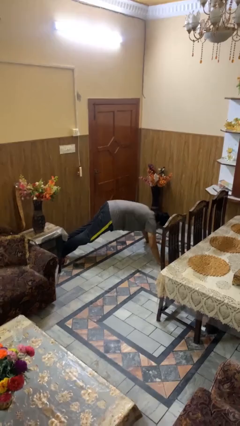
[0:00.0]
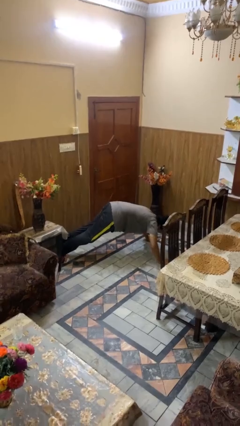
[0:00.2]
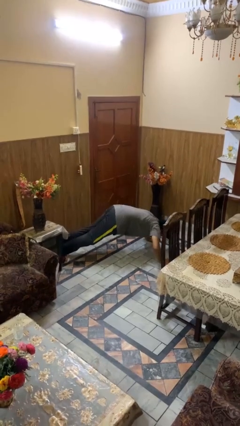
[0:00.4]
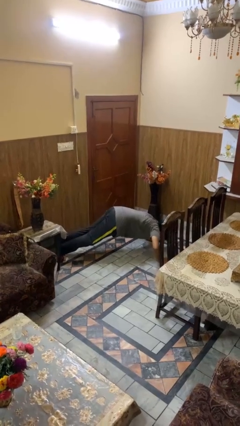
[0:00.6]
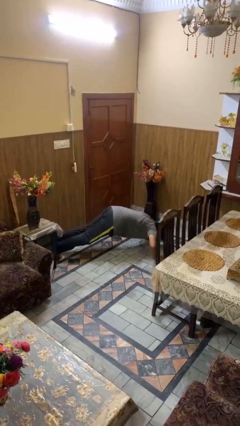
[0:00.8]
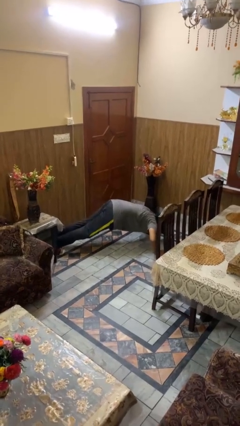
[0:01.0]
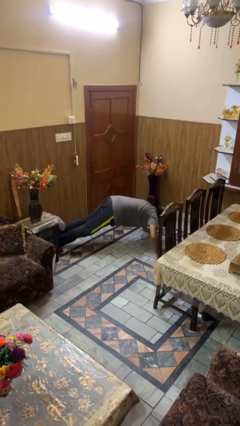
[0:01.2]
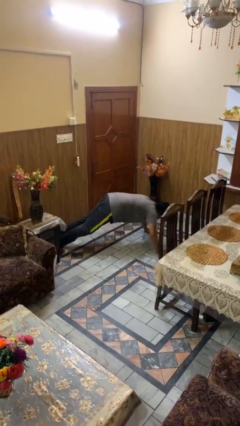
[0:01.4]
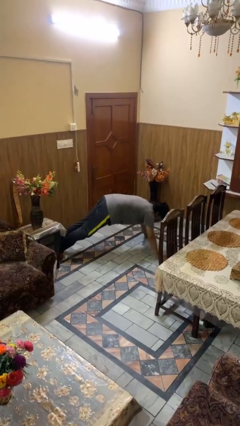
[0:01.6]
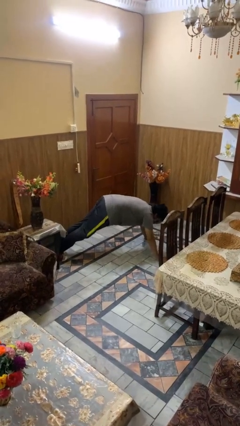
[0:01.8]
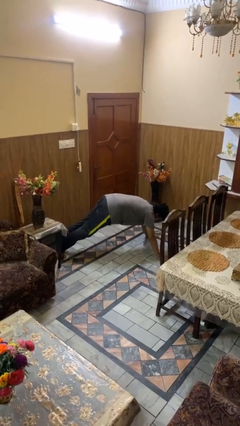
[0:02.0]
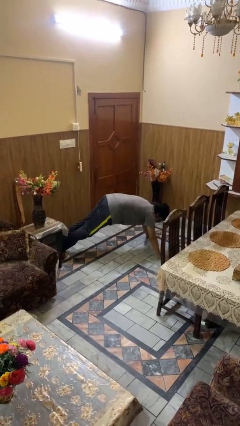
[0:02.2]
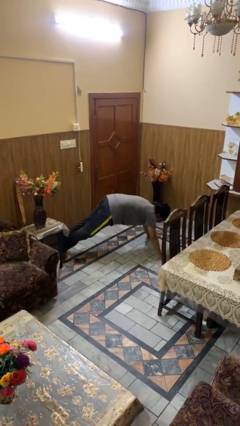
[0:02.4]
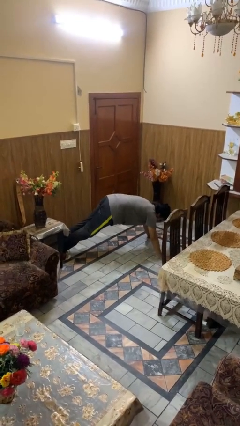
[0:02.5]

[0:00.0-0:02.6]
person exercises with pushup

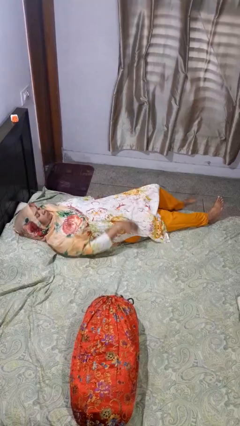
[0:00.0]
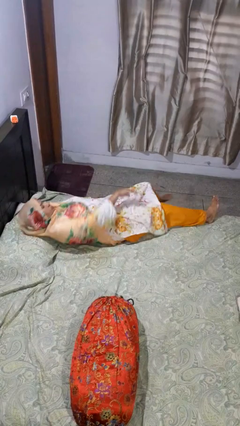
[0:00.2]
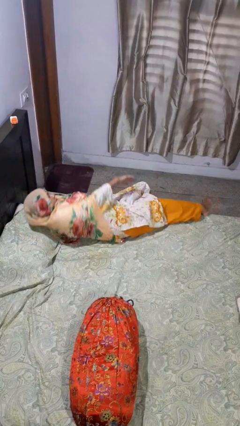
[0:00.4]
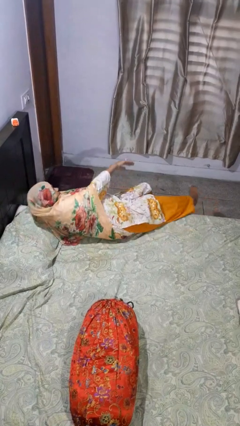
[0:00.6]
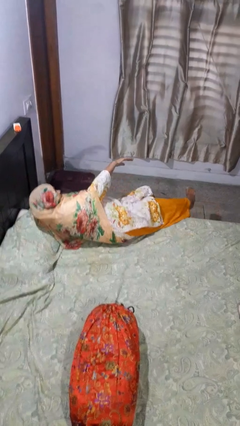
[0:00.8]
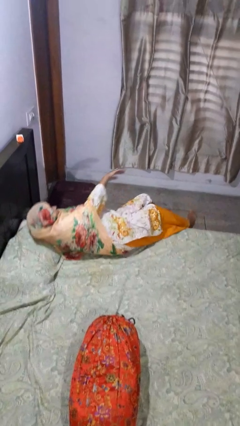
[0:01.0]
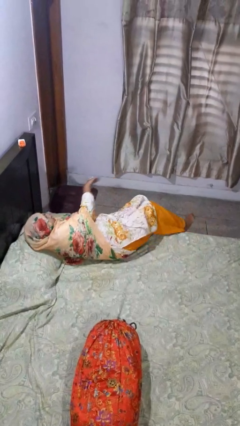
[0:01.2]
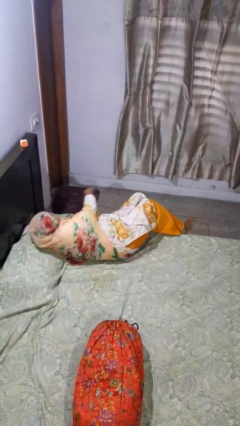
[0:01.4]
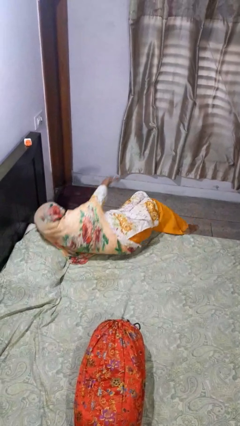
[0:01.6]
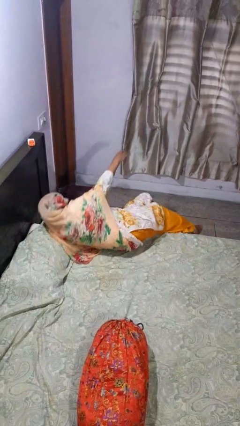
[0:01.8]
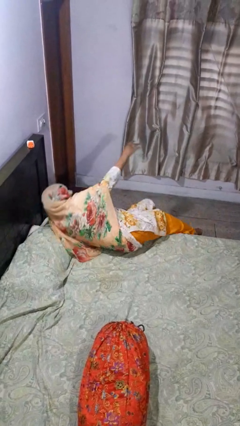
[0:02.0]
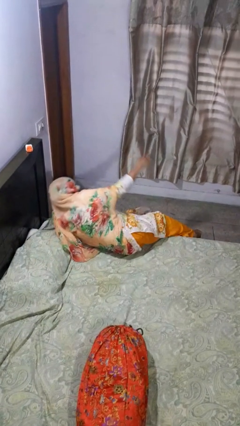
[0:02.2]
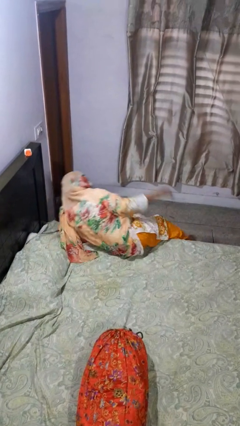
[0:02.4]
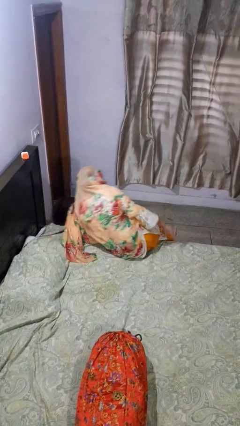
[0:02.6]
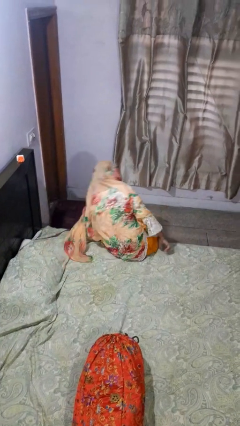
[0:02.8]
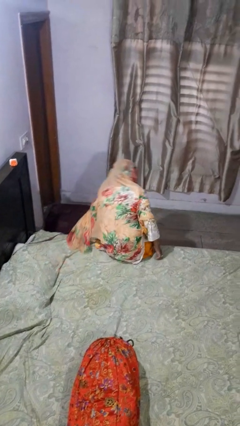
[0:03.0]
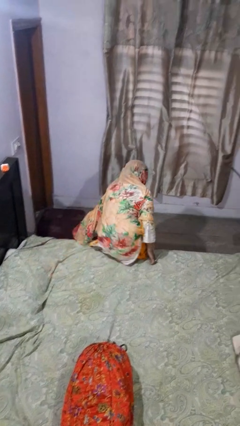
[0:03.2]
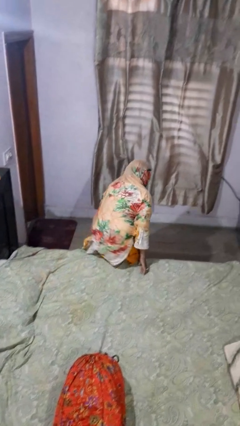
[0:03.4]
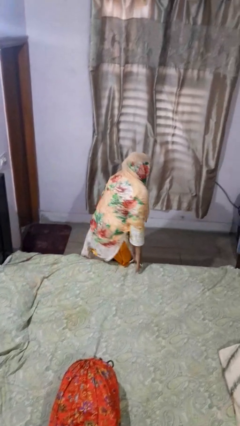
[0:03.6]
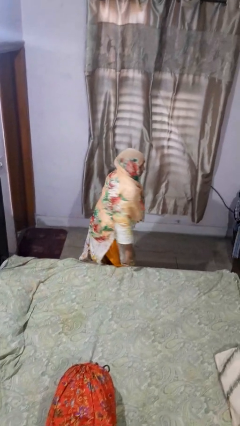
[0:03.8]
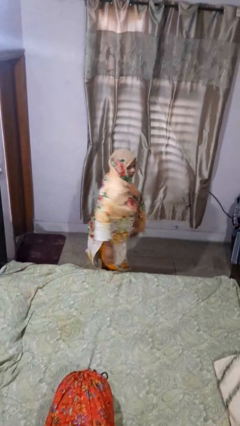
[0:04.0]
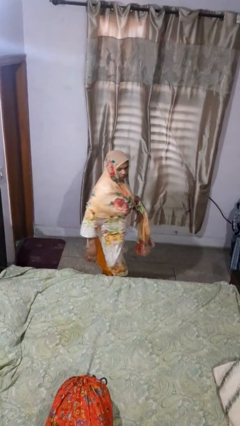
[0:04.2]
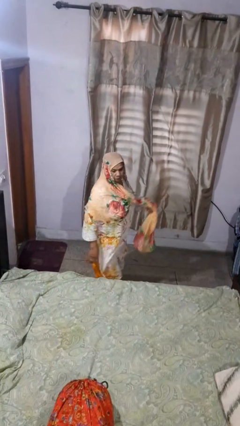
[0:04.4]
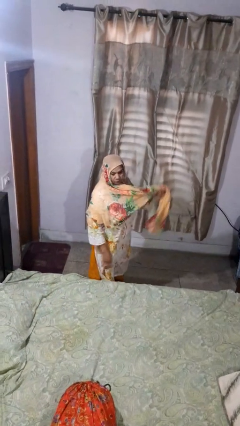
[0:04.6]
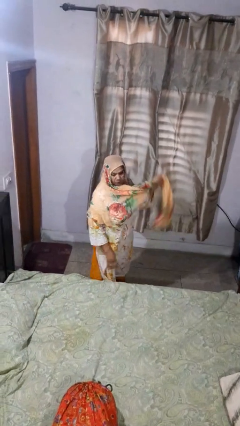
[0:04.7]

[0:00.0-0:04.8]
person stands up

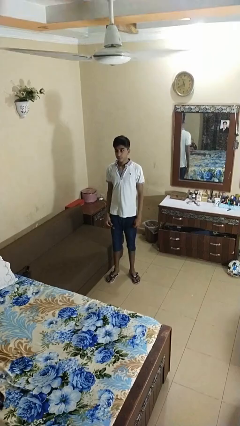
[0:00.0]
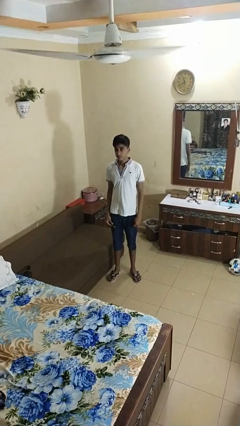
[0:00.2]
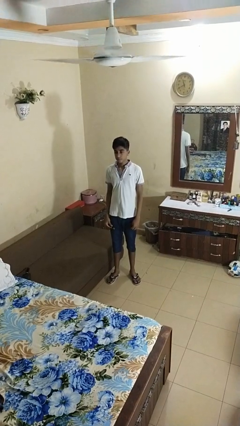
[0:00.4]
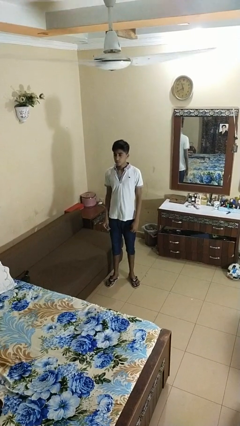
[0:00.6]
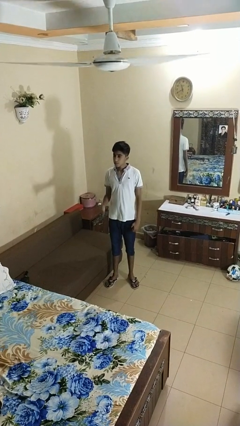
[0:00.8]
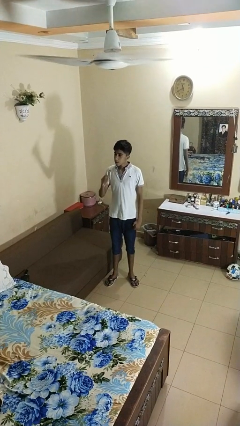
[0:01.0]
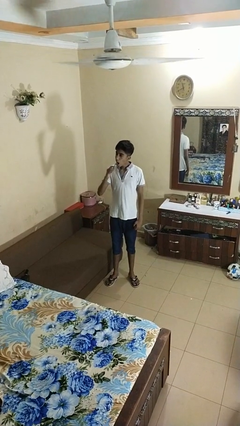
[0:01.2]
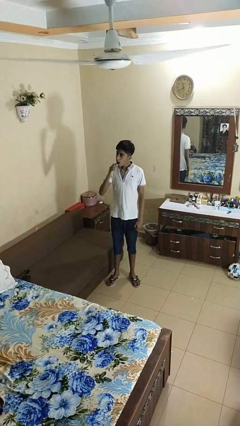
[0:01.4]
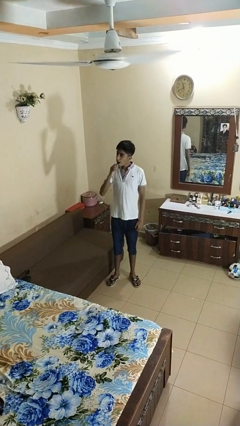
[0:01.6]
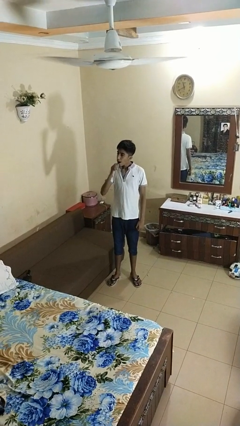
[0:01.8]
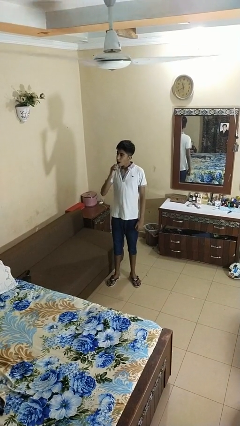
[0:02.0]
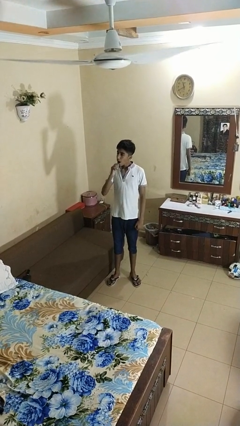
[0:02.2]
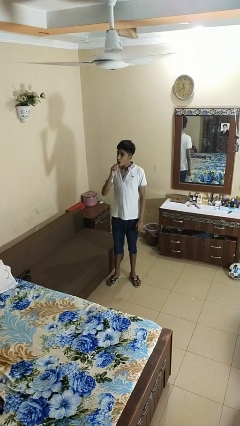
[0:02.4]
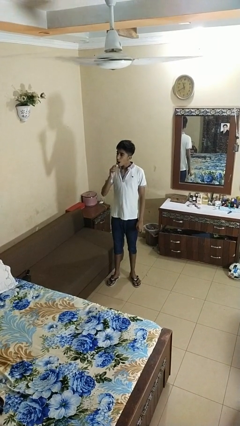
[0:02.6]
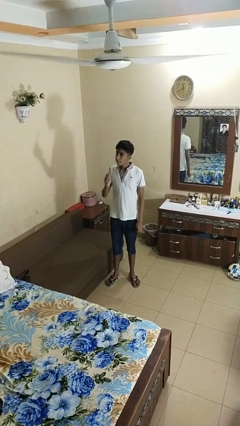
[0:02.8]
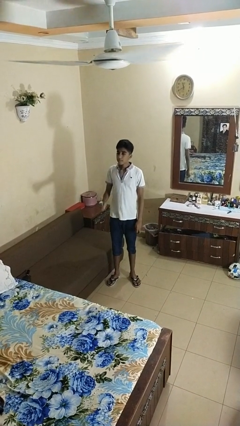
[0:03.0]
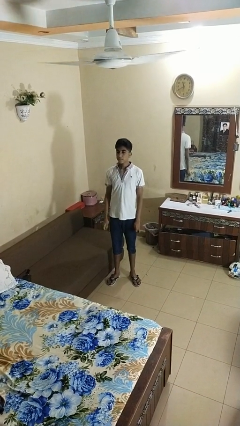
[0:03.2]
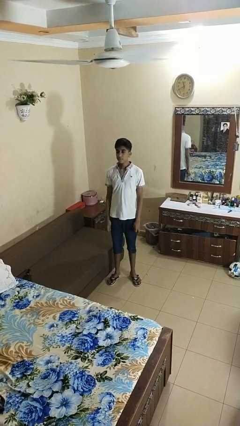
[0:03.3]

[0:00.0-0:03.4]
person brushes teeth

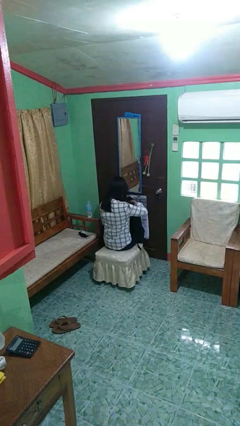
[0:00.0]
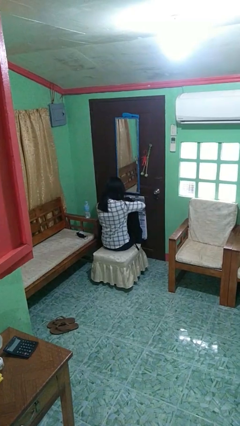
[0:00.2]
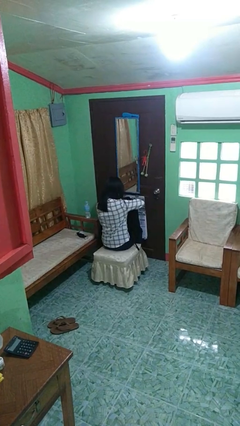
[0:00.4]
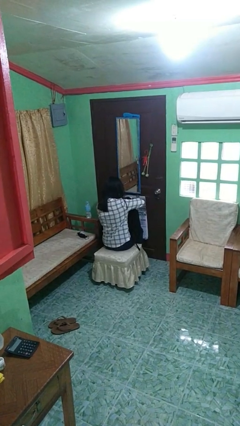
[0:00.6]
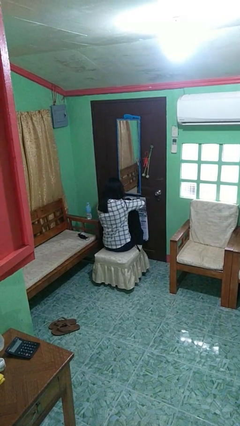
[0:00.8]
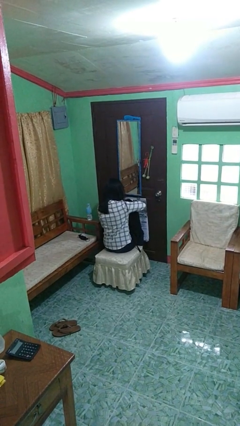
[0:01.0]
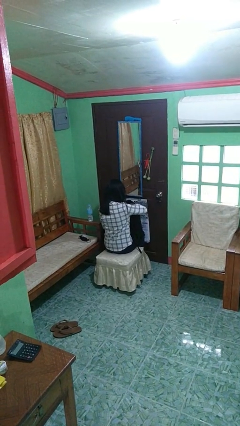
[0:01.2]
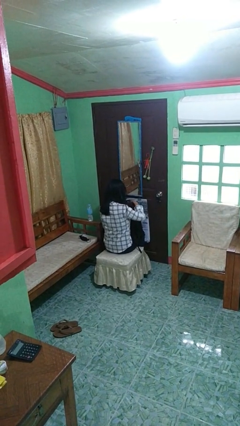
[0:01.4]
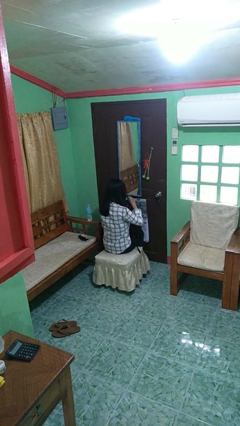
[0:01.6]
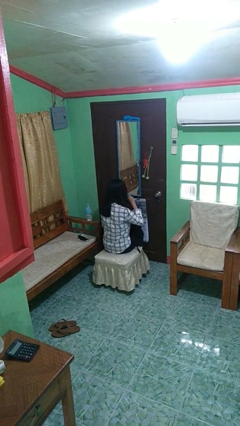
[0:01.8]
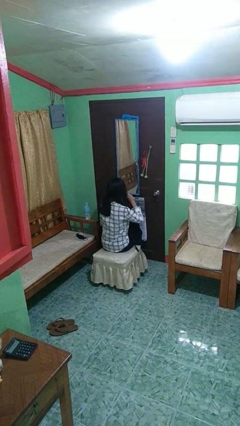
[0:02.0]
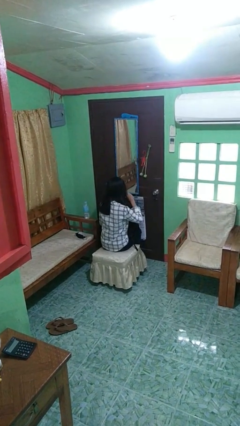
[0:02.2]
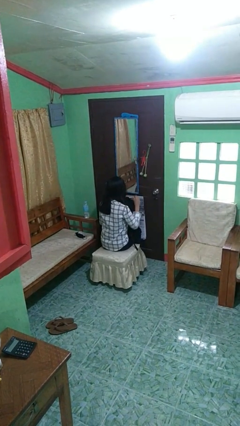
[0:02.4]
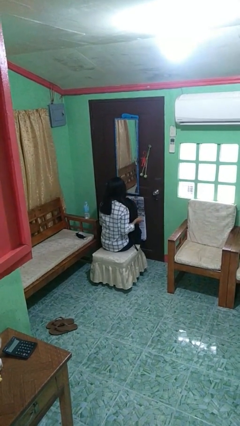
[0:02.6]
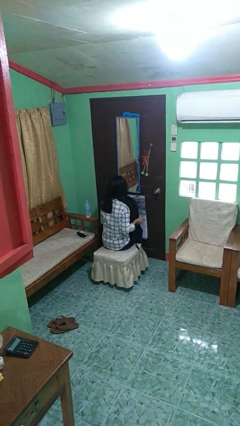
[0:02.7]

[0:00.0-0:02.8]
person eats snack from bag

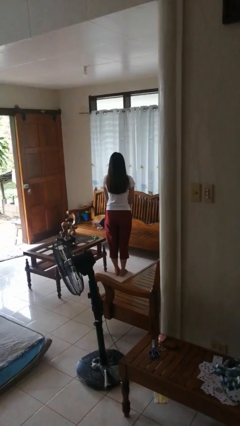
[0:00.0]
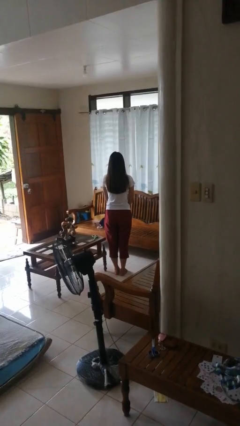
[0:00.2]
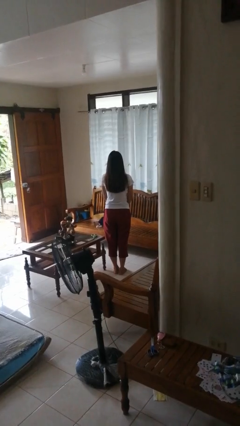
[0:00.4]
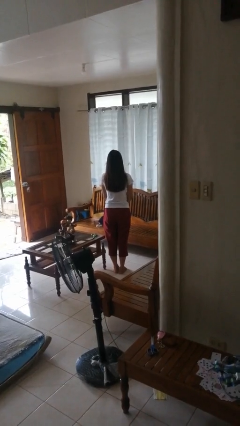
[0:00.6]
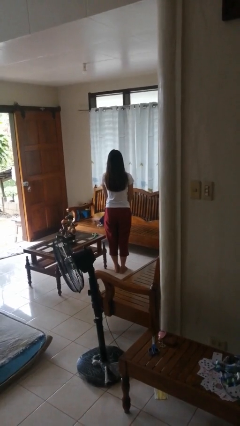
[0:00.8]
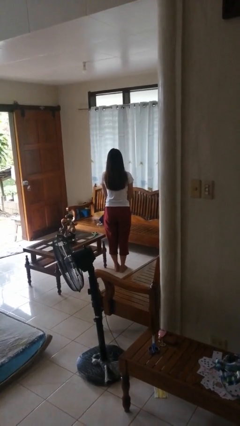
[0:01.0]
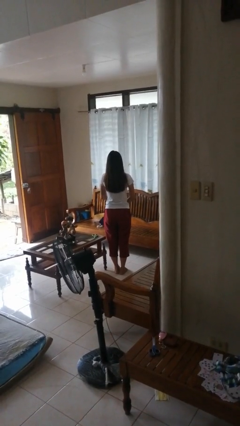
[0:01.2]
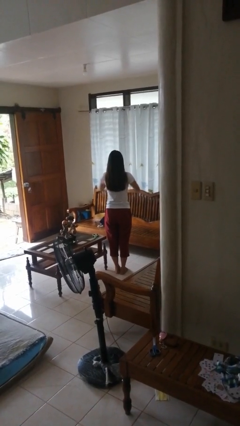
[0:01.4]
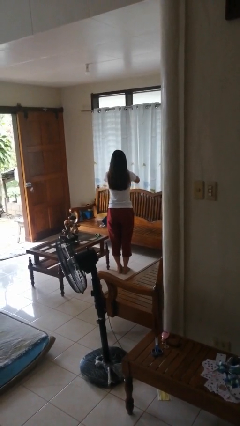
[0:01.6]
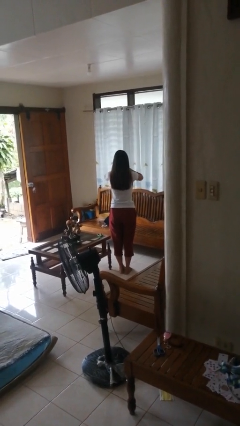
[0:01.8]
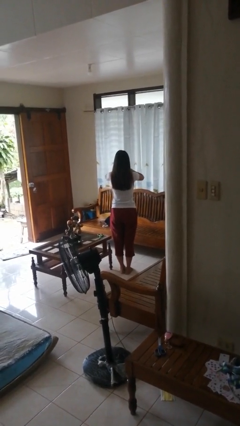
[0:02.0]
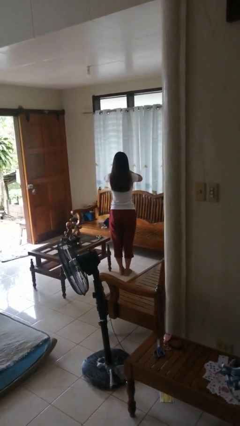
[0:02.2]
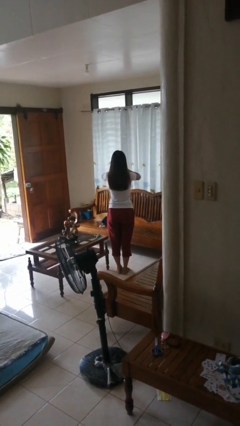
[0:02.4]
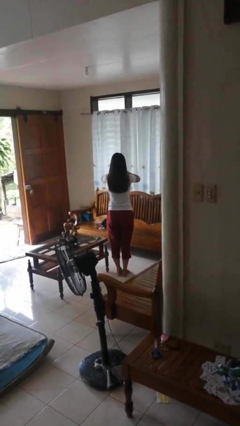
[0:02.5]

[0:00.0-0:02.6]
person covers face with hands

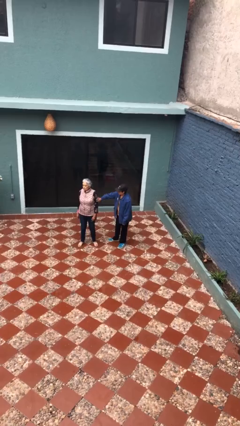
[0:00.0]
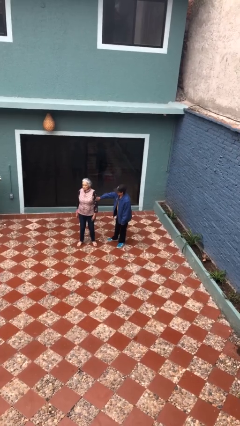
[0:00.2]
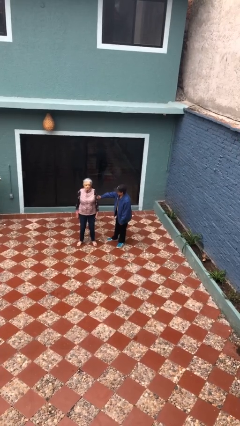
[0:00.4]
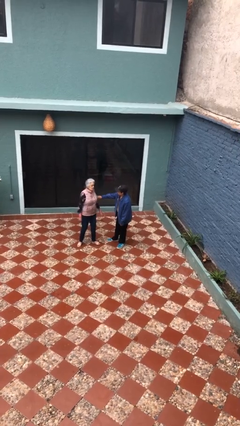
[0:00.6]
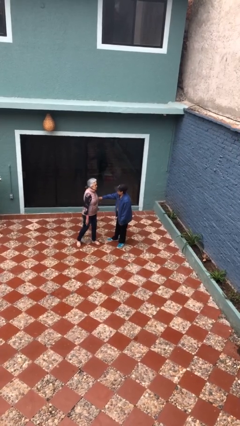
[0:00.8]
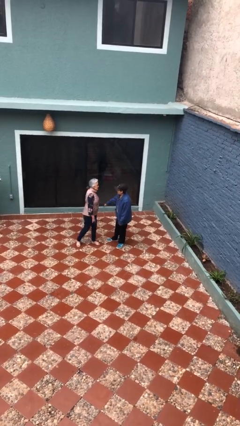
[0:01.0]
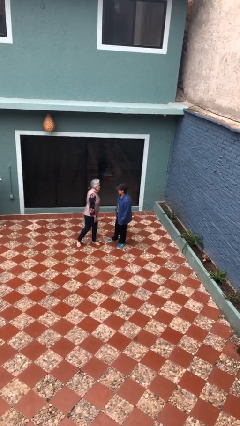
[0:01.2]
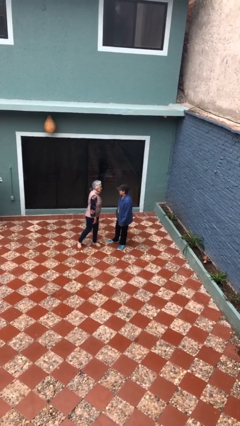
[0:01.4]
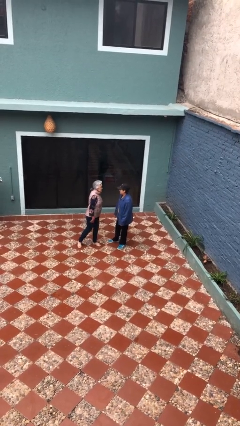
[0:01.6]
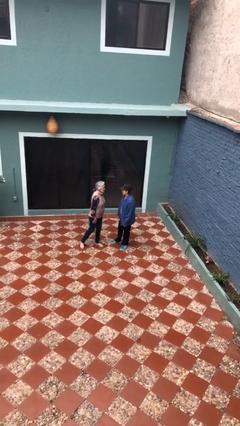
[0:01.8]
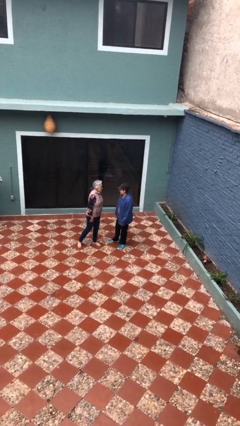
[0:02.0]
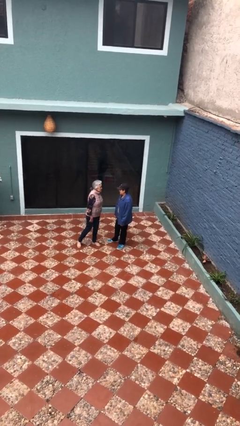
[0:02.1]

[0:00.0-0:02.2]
person grabs person by bicep
